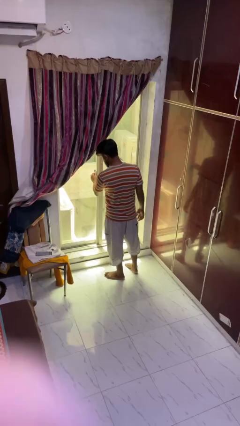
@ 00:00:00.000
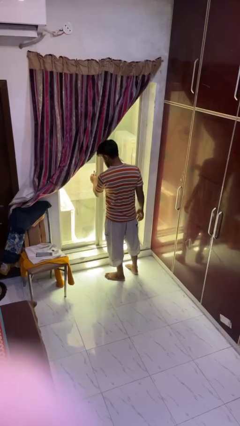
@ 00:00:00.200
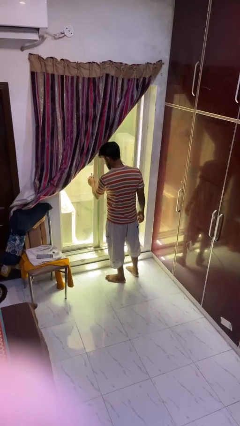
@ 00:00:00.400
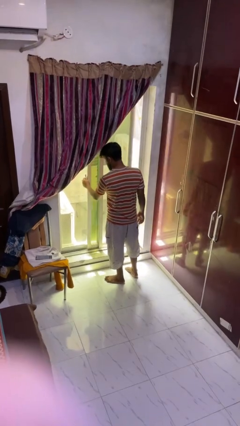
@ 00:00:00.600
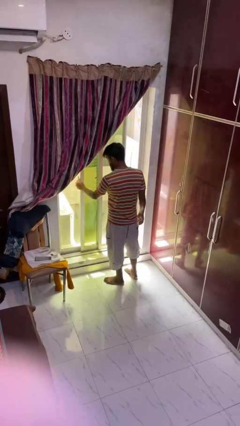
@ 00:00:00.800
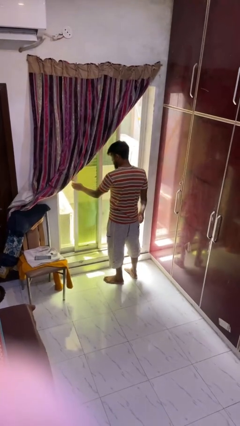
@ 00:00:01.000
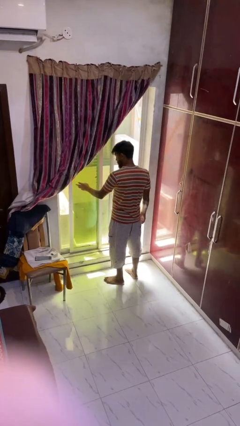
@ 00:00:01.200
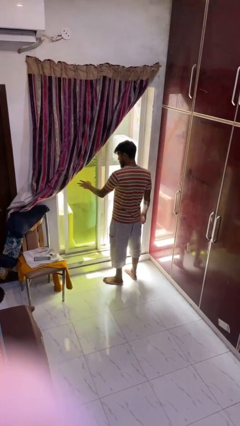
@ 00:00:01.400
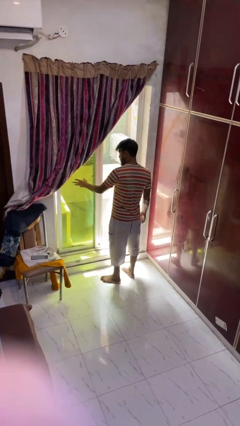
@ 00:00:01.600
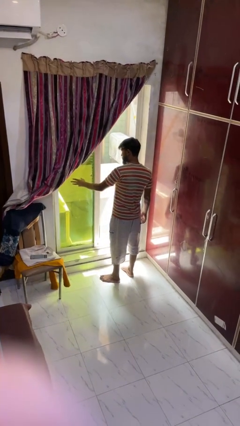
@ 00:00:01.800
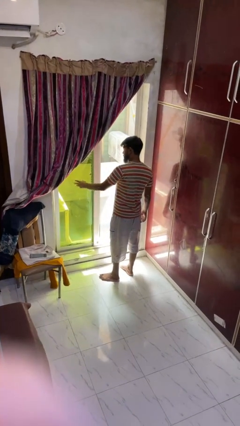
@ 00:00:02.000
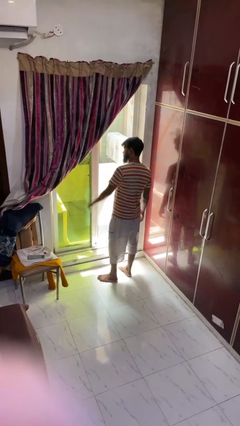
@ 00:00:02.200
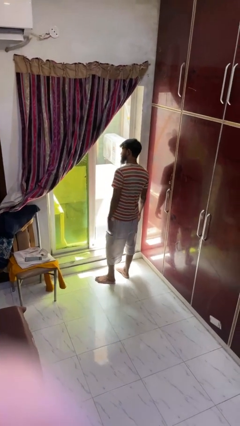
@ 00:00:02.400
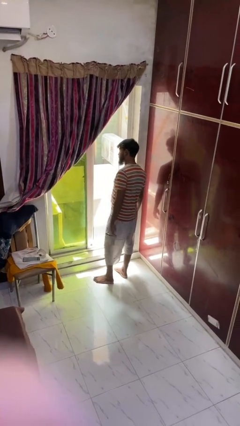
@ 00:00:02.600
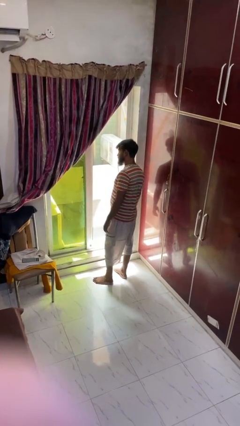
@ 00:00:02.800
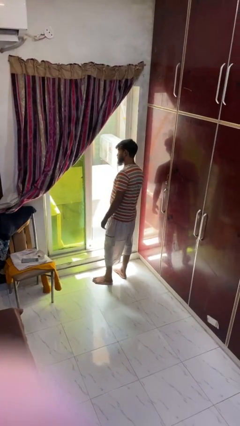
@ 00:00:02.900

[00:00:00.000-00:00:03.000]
person opens home window

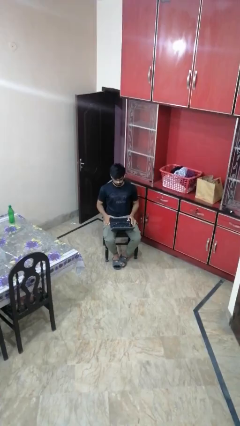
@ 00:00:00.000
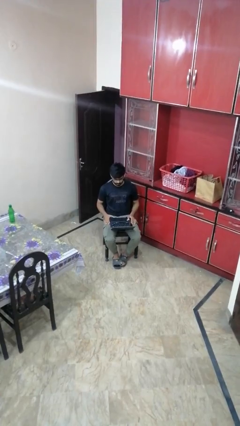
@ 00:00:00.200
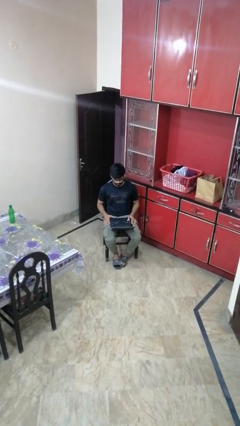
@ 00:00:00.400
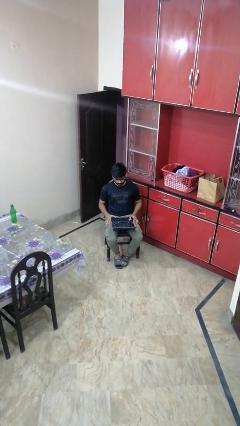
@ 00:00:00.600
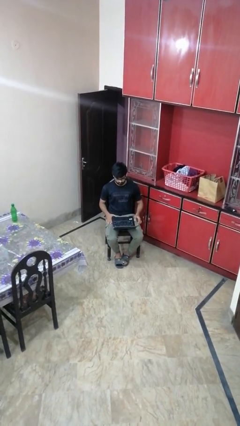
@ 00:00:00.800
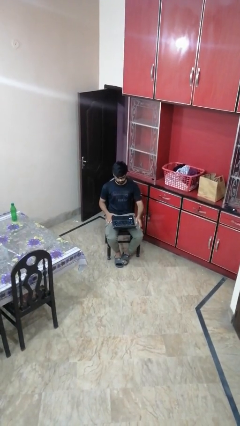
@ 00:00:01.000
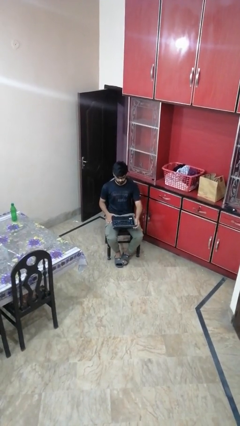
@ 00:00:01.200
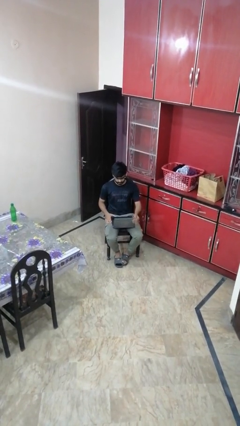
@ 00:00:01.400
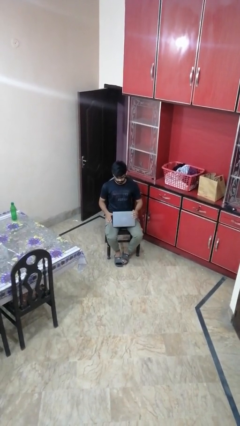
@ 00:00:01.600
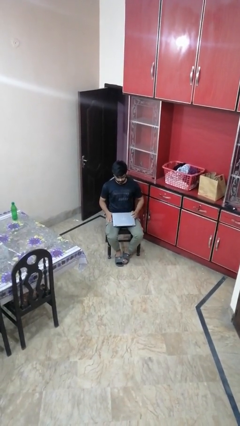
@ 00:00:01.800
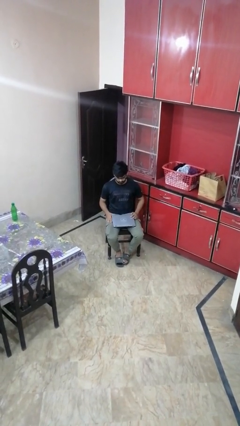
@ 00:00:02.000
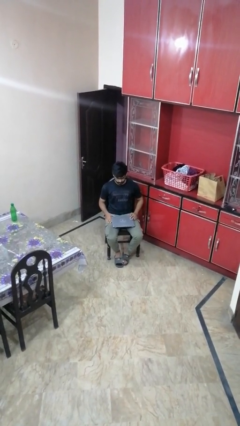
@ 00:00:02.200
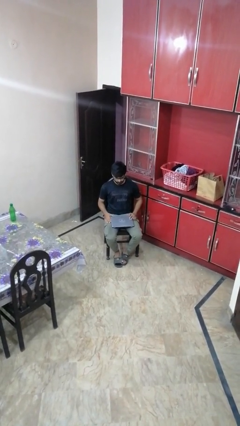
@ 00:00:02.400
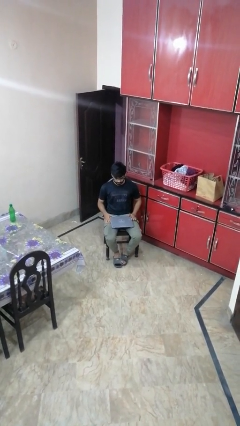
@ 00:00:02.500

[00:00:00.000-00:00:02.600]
person closes laptop

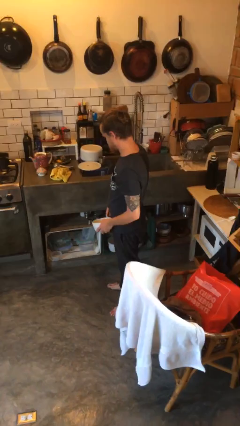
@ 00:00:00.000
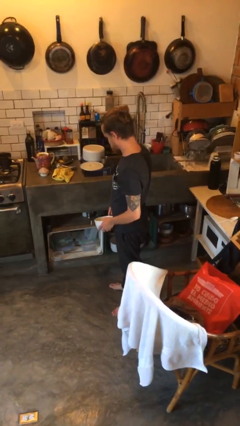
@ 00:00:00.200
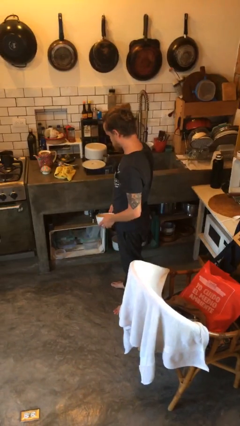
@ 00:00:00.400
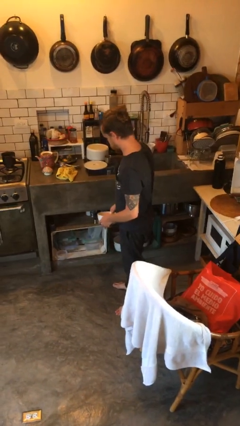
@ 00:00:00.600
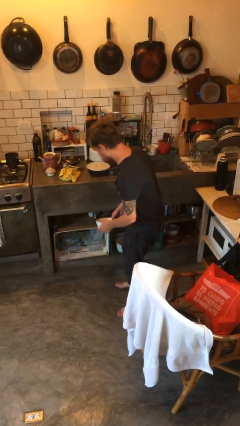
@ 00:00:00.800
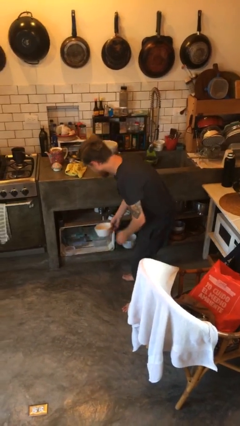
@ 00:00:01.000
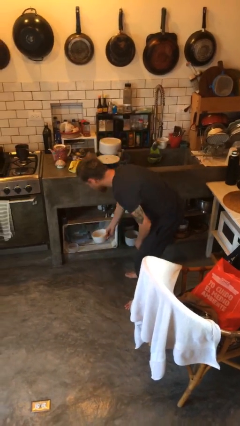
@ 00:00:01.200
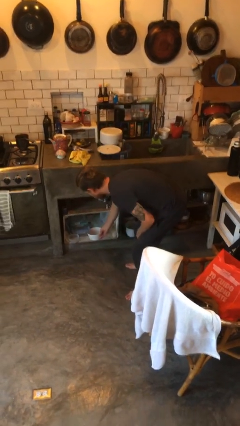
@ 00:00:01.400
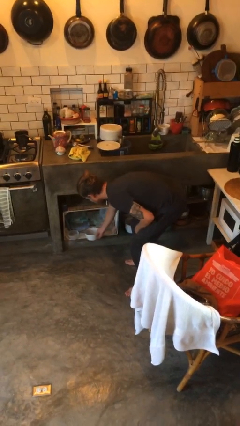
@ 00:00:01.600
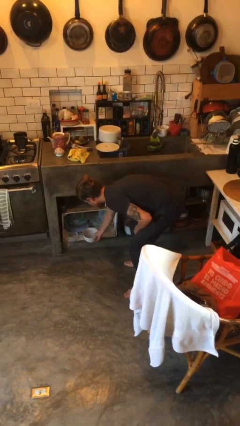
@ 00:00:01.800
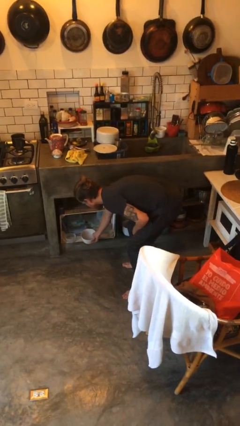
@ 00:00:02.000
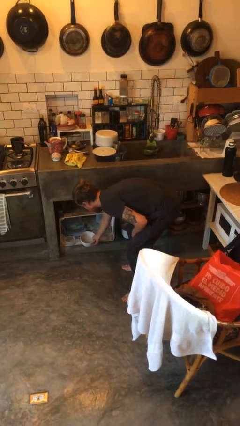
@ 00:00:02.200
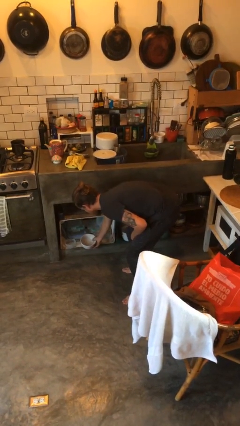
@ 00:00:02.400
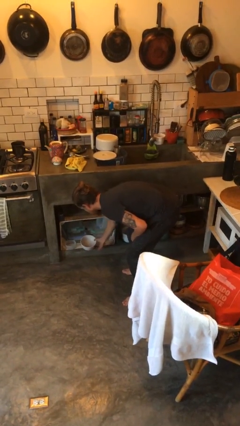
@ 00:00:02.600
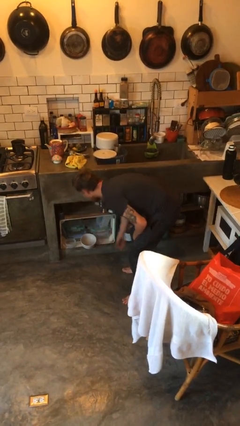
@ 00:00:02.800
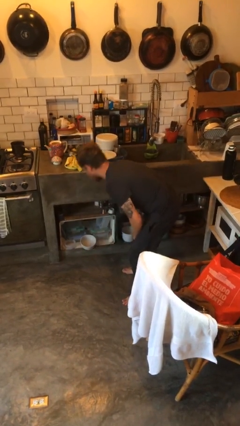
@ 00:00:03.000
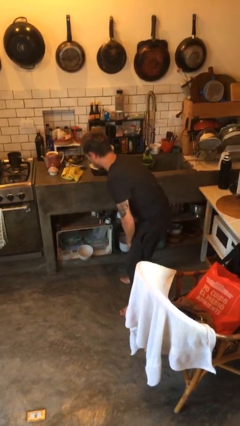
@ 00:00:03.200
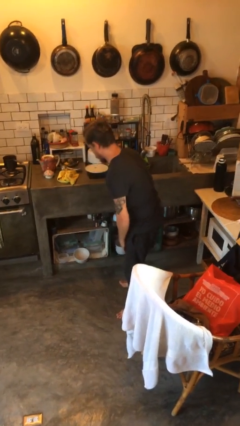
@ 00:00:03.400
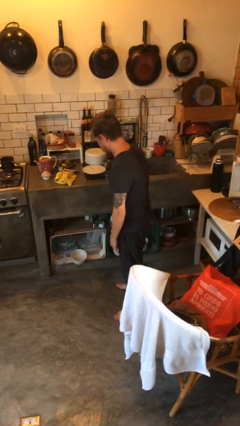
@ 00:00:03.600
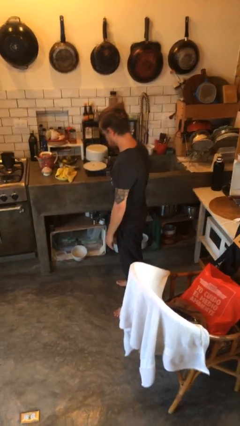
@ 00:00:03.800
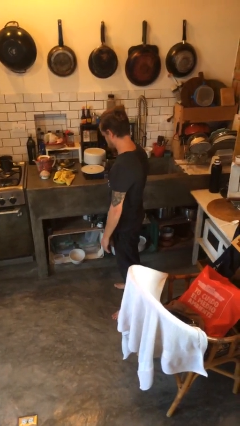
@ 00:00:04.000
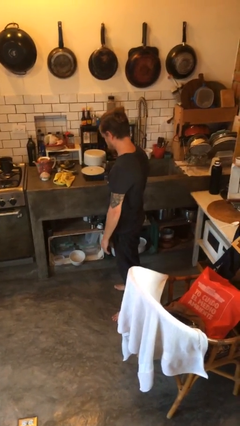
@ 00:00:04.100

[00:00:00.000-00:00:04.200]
person puts down object into cabinet

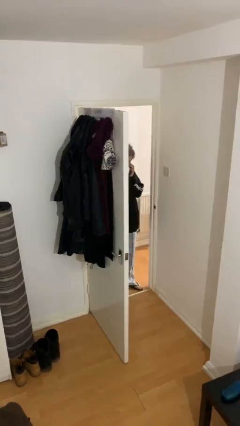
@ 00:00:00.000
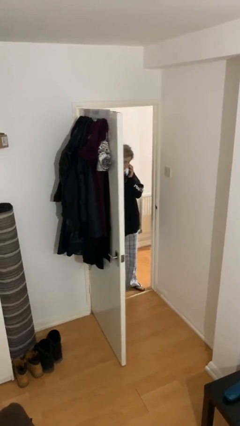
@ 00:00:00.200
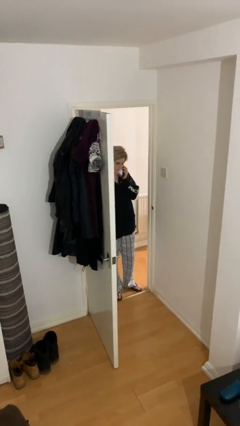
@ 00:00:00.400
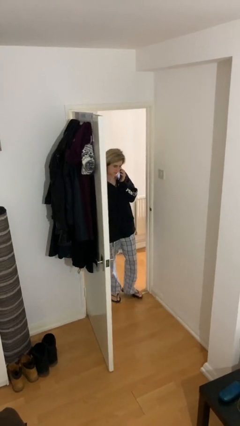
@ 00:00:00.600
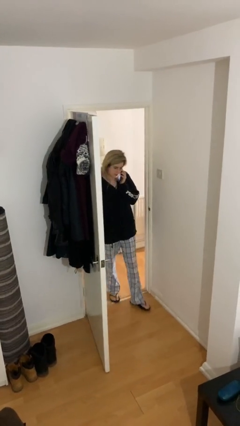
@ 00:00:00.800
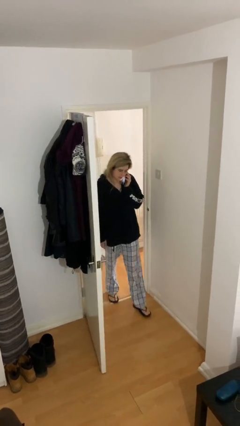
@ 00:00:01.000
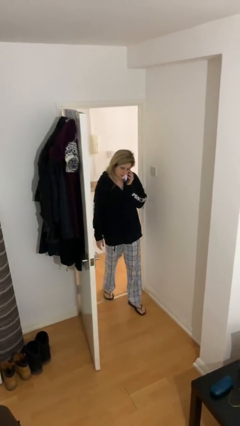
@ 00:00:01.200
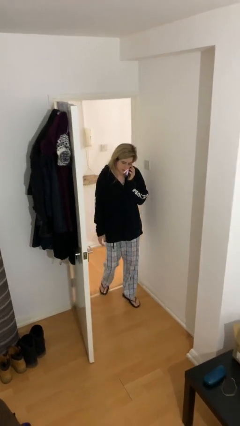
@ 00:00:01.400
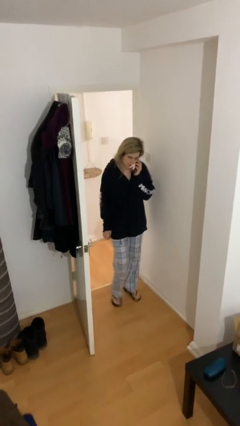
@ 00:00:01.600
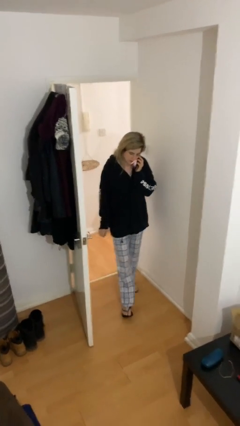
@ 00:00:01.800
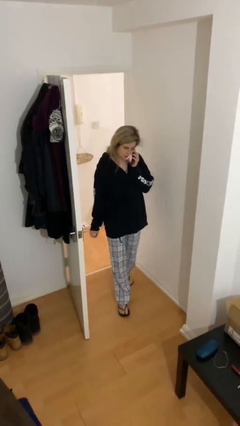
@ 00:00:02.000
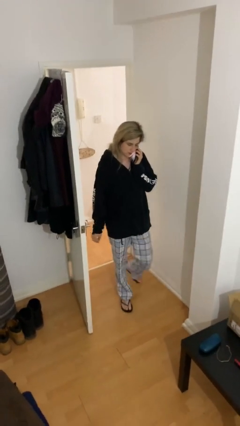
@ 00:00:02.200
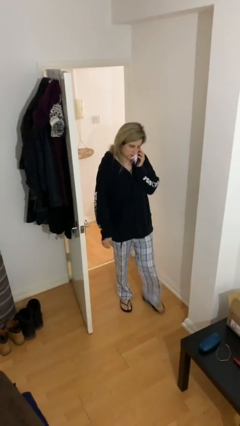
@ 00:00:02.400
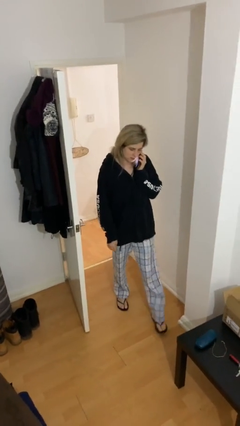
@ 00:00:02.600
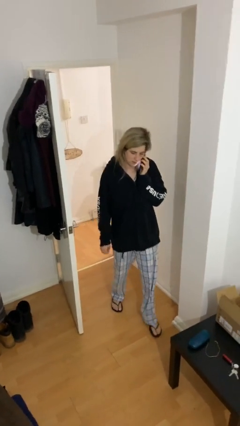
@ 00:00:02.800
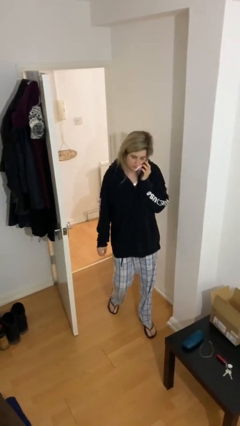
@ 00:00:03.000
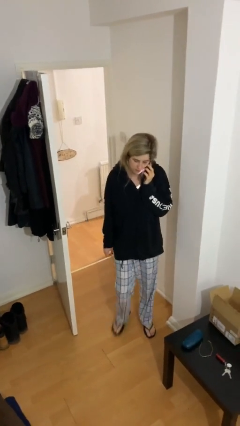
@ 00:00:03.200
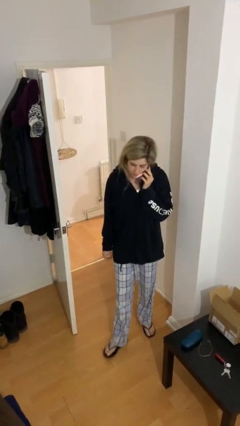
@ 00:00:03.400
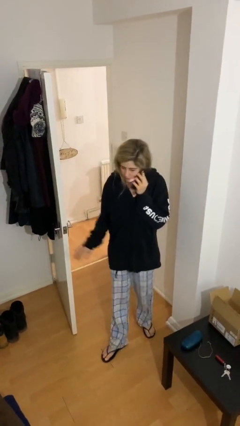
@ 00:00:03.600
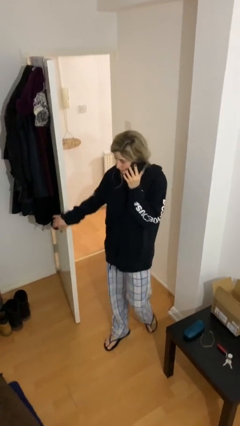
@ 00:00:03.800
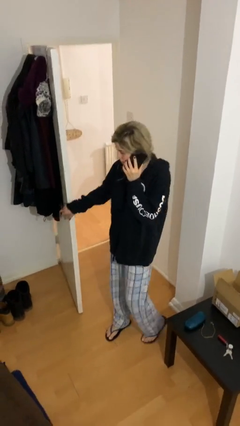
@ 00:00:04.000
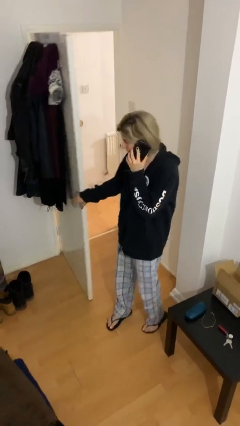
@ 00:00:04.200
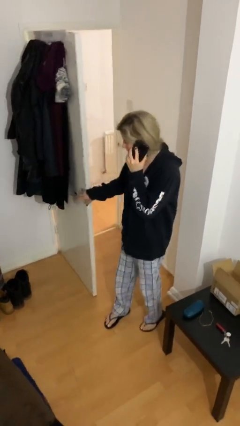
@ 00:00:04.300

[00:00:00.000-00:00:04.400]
person enters scene through structure

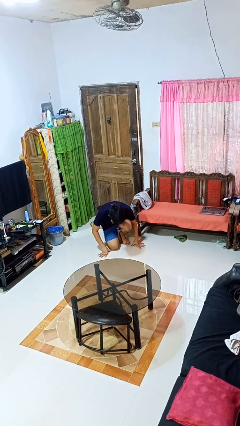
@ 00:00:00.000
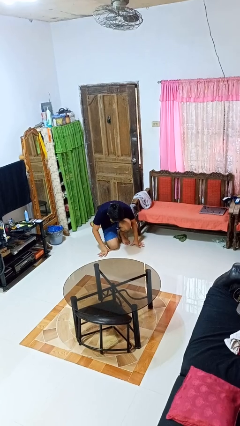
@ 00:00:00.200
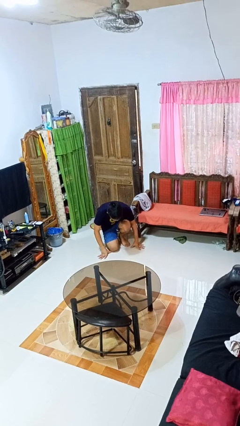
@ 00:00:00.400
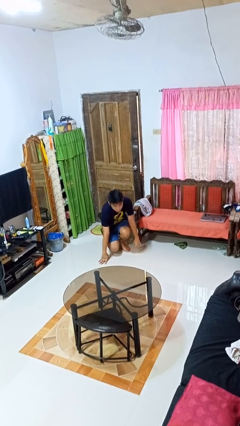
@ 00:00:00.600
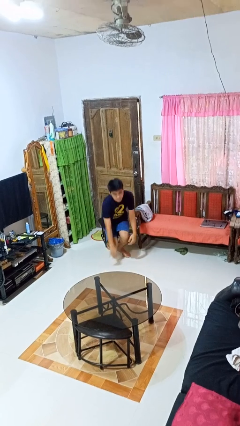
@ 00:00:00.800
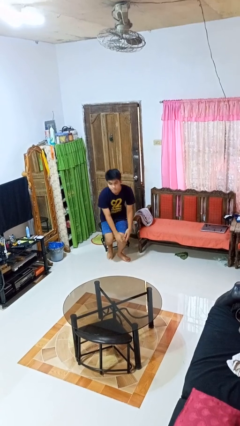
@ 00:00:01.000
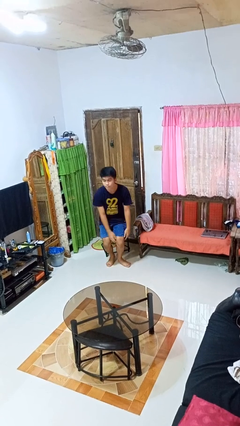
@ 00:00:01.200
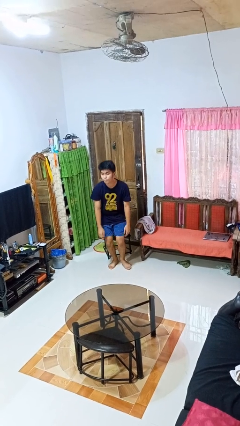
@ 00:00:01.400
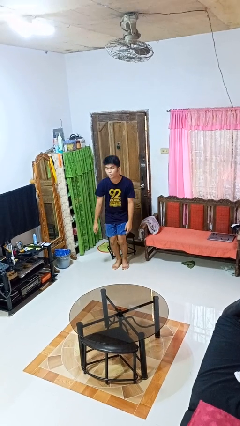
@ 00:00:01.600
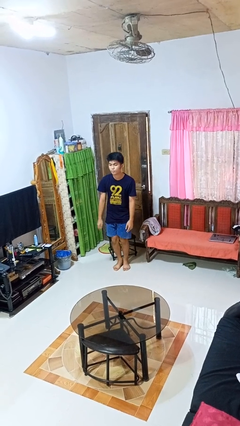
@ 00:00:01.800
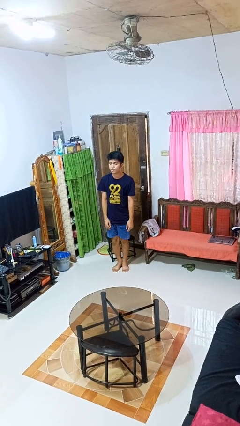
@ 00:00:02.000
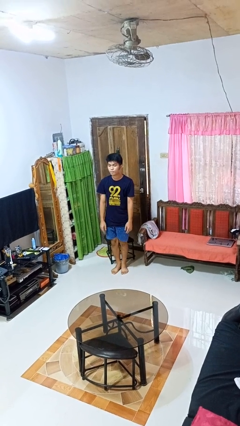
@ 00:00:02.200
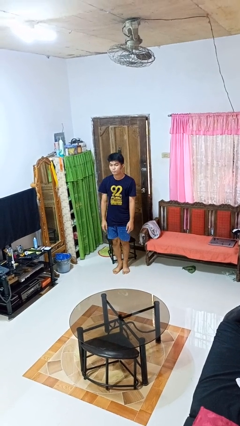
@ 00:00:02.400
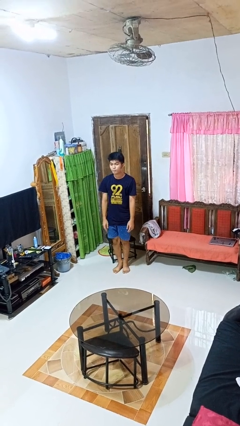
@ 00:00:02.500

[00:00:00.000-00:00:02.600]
person stands up from floor

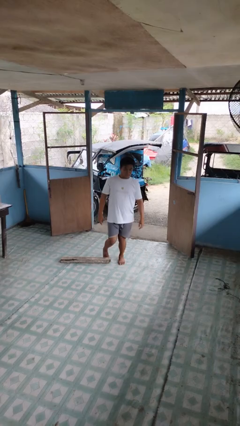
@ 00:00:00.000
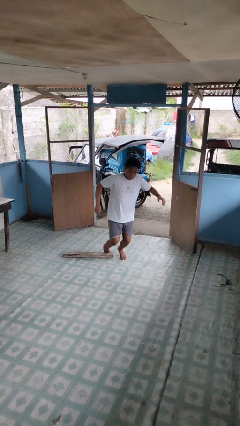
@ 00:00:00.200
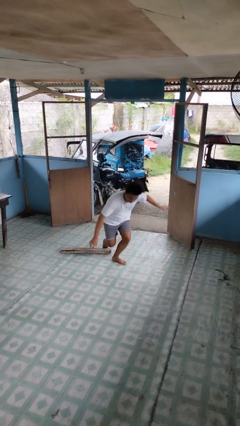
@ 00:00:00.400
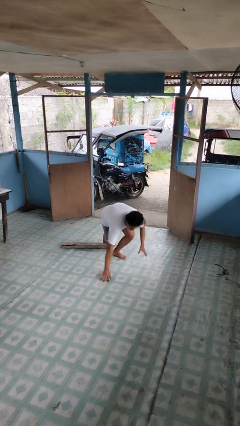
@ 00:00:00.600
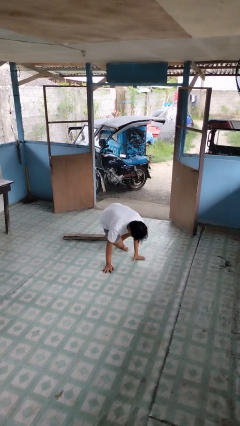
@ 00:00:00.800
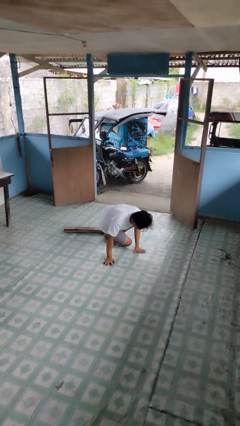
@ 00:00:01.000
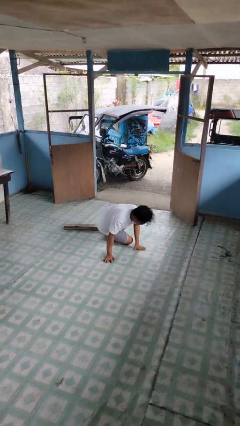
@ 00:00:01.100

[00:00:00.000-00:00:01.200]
person trips on object on floor
